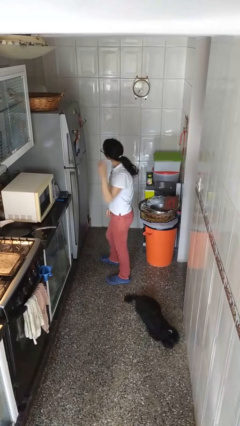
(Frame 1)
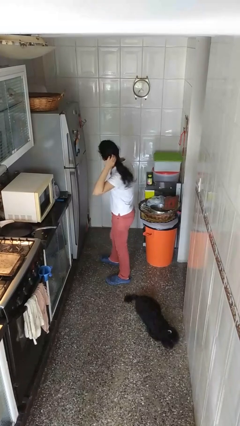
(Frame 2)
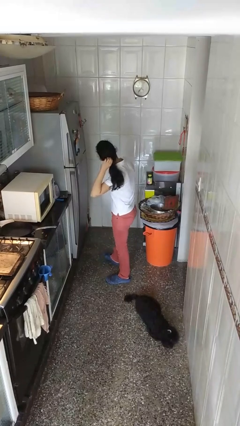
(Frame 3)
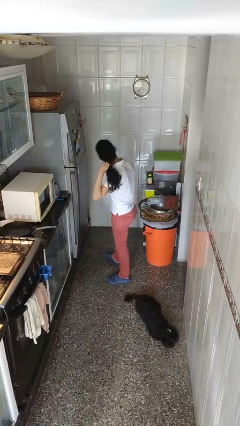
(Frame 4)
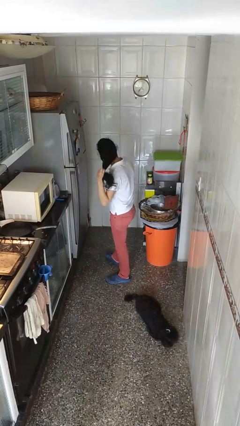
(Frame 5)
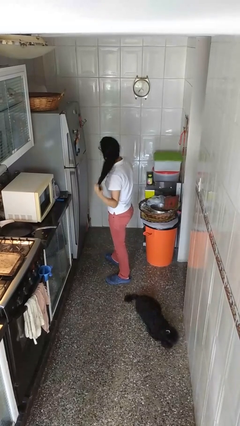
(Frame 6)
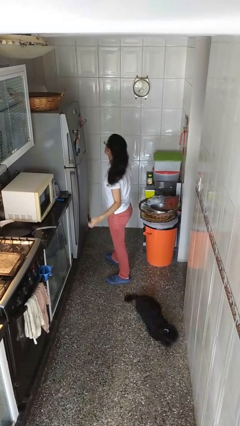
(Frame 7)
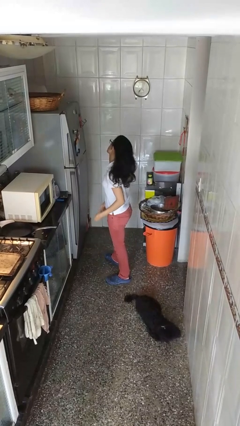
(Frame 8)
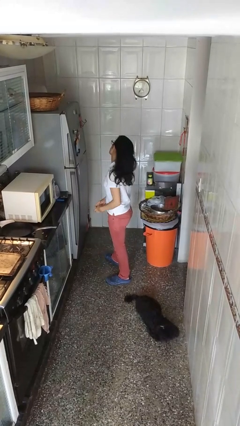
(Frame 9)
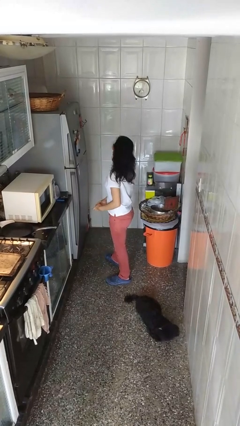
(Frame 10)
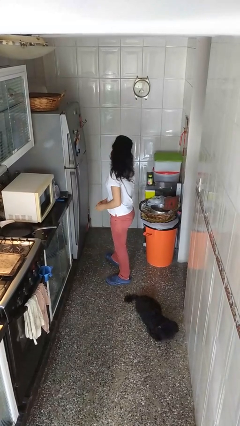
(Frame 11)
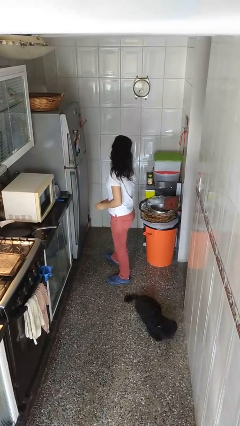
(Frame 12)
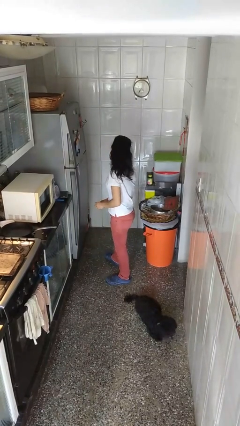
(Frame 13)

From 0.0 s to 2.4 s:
person takes off hairtie

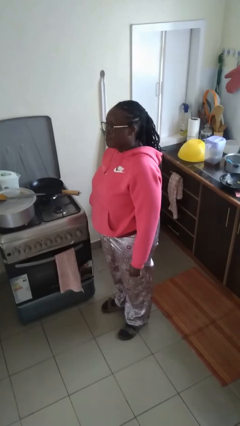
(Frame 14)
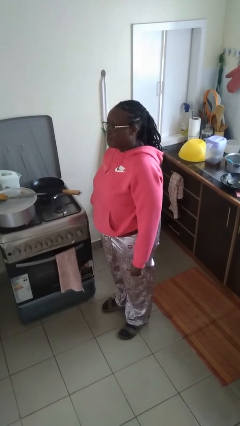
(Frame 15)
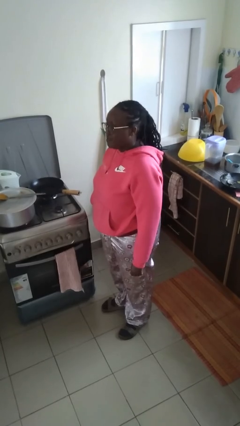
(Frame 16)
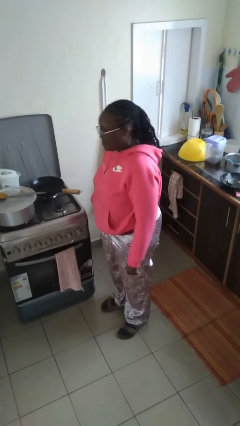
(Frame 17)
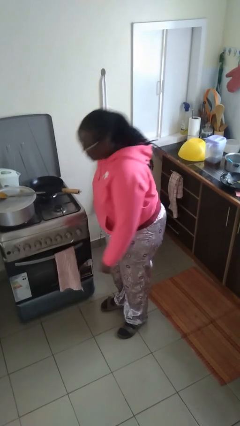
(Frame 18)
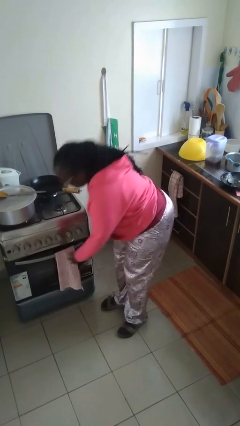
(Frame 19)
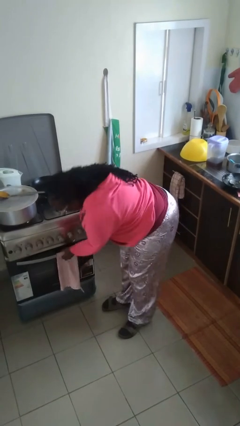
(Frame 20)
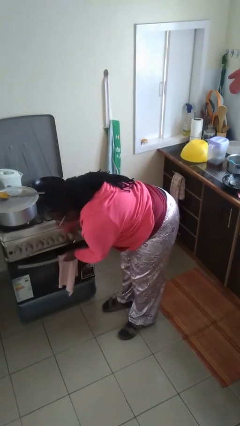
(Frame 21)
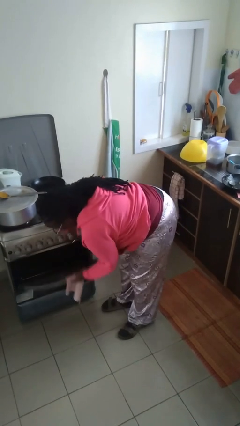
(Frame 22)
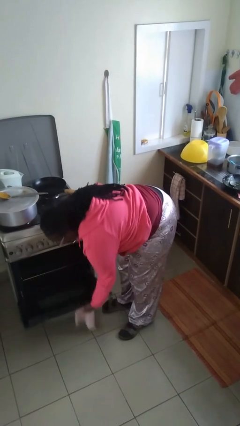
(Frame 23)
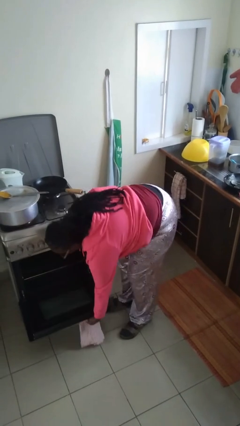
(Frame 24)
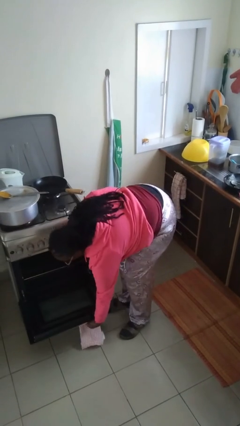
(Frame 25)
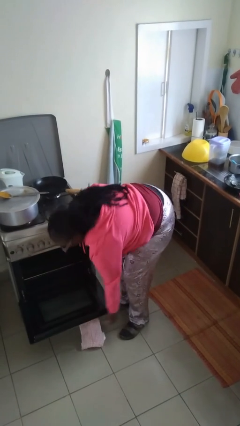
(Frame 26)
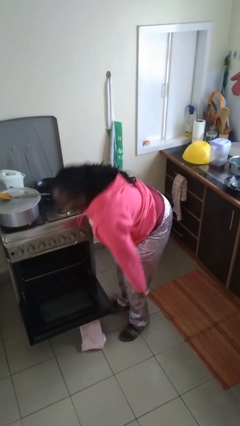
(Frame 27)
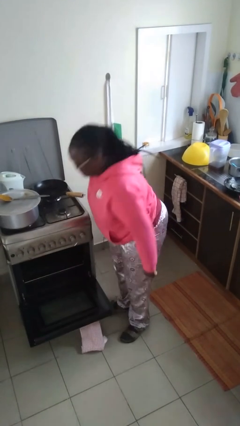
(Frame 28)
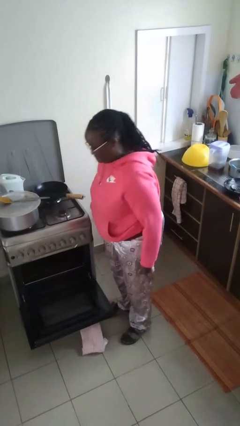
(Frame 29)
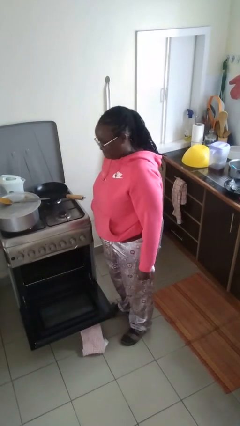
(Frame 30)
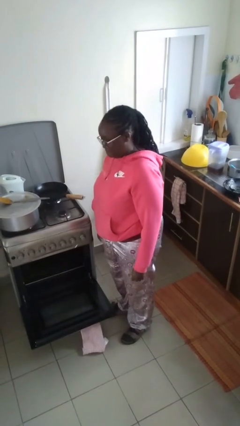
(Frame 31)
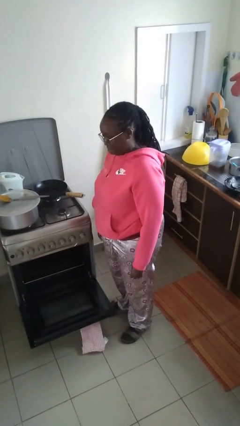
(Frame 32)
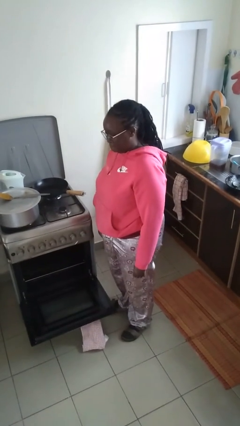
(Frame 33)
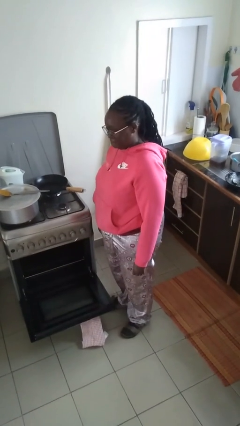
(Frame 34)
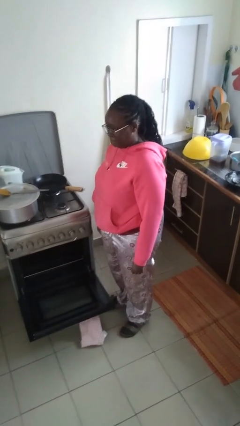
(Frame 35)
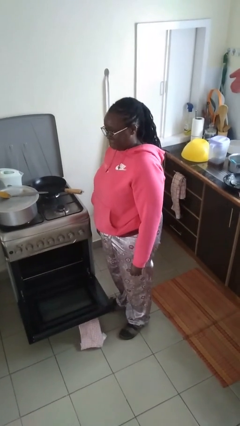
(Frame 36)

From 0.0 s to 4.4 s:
person opens oven door

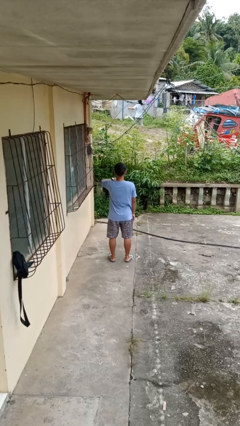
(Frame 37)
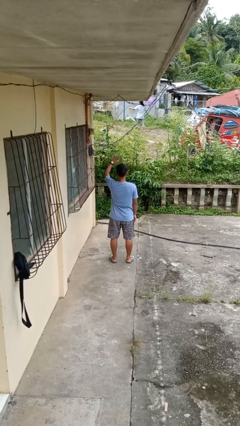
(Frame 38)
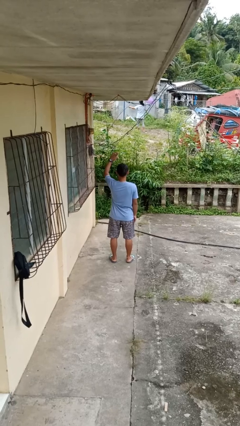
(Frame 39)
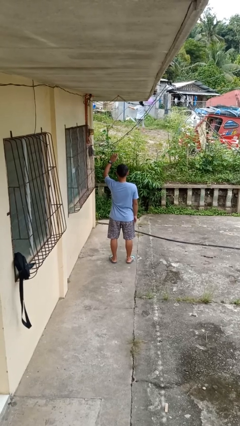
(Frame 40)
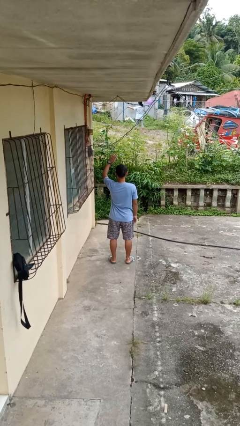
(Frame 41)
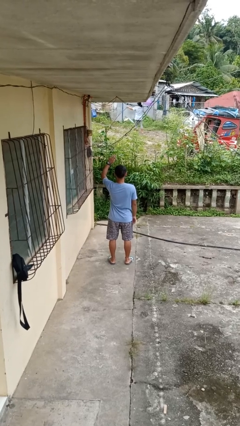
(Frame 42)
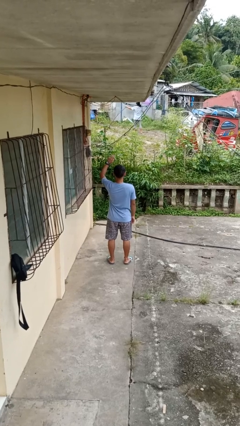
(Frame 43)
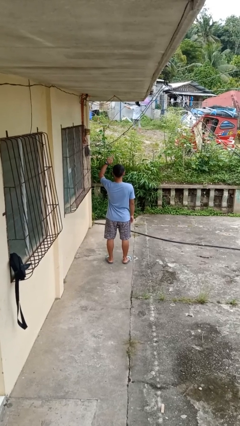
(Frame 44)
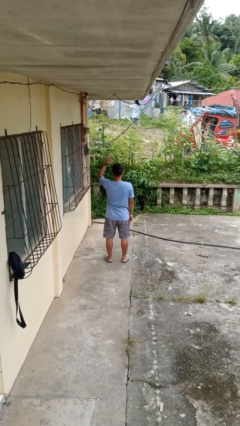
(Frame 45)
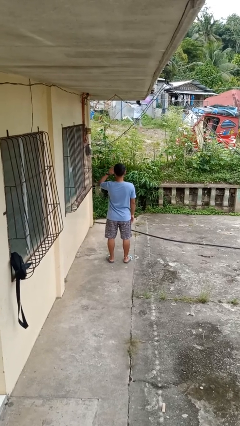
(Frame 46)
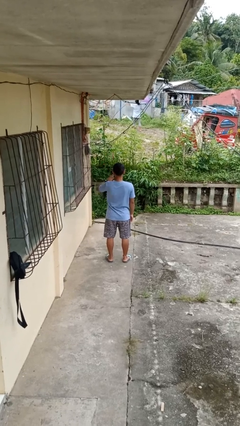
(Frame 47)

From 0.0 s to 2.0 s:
person gestures swipe up

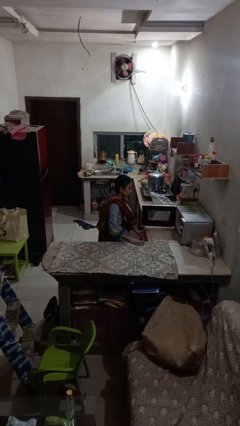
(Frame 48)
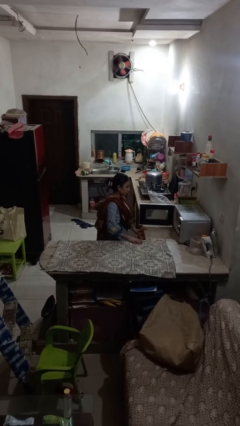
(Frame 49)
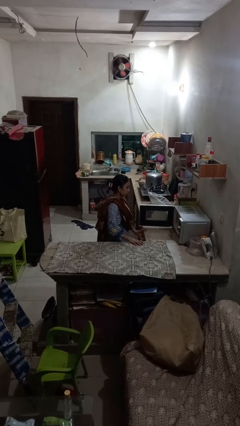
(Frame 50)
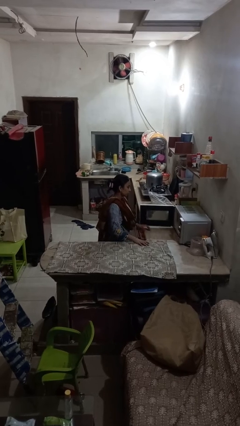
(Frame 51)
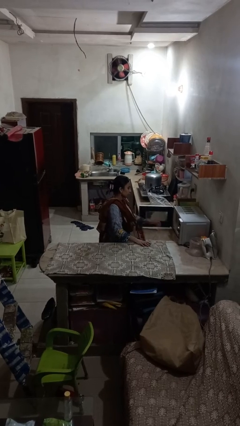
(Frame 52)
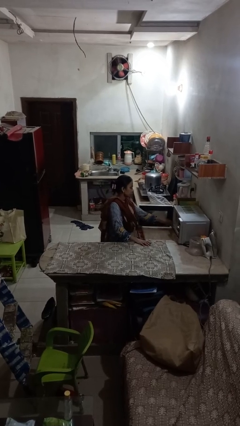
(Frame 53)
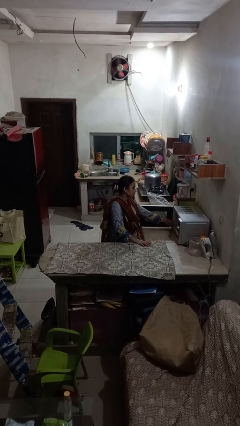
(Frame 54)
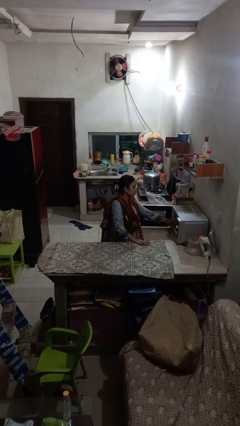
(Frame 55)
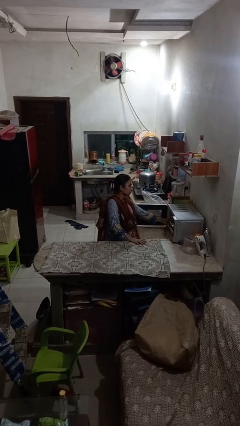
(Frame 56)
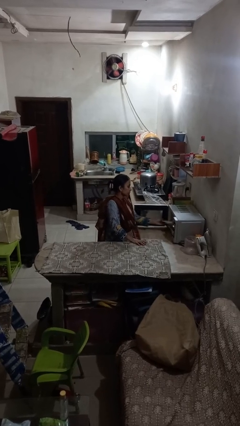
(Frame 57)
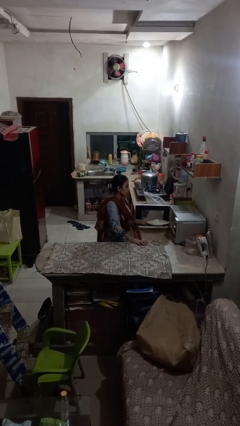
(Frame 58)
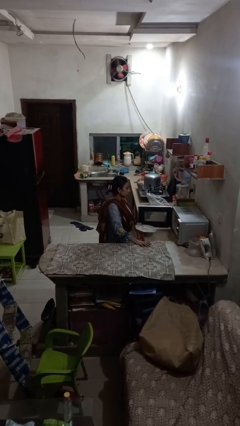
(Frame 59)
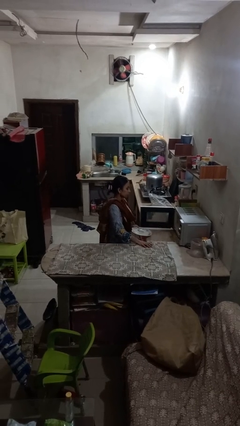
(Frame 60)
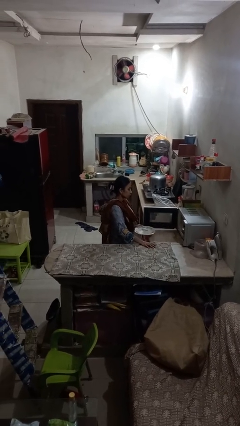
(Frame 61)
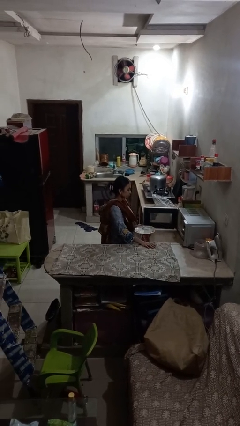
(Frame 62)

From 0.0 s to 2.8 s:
person takes object from microwave

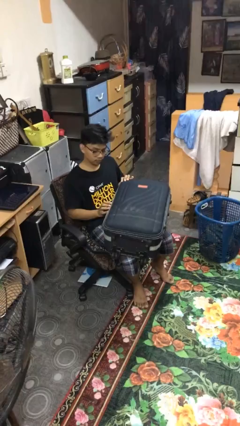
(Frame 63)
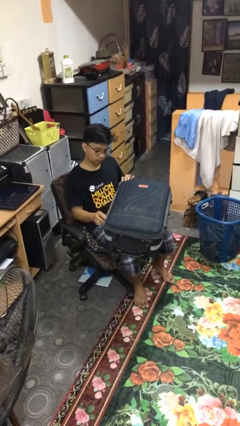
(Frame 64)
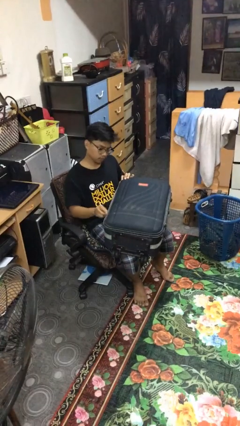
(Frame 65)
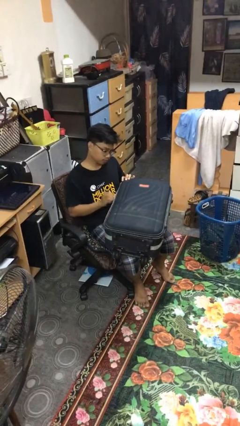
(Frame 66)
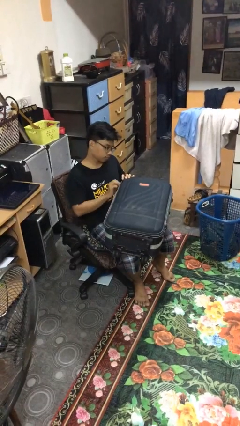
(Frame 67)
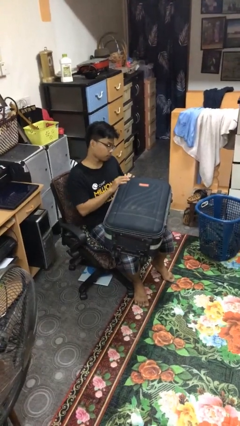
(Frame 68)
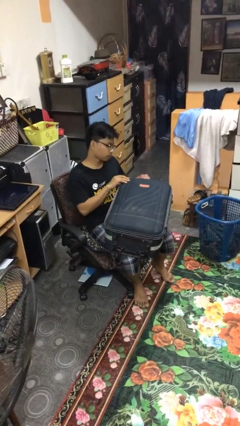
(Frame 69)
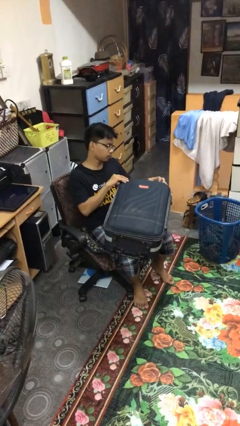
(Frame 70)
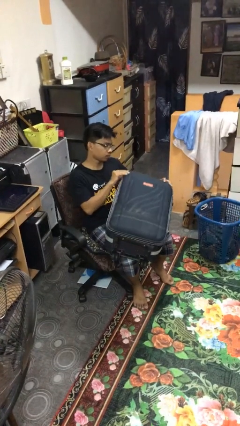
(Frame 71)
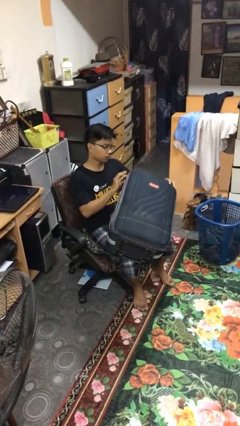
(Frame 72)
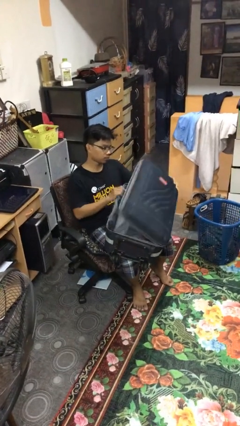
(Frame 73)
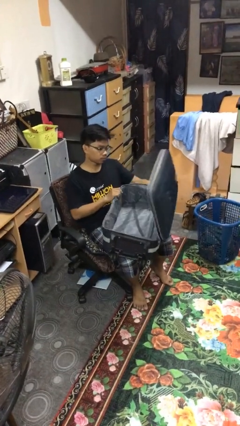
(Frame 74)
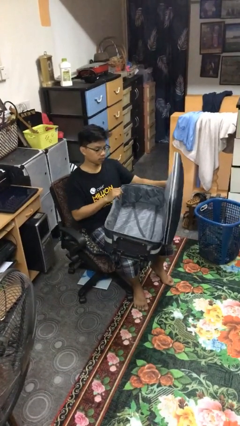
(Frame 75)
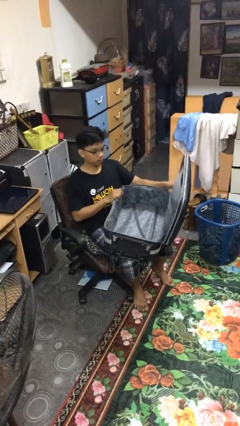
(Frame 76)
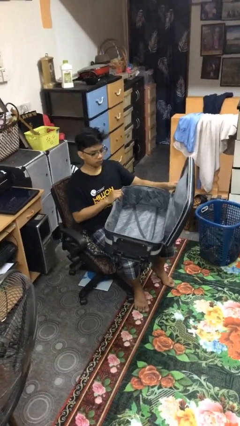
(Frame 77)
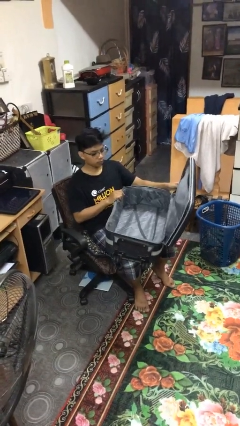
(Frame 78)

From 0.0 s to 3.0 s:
person opens suitcase

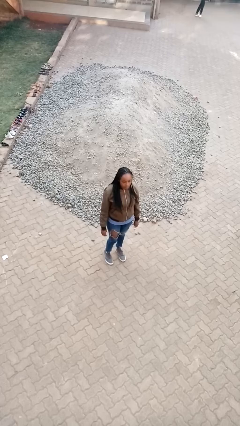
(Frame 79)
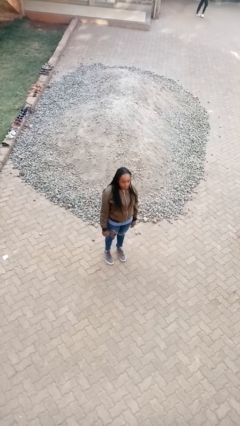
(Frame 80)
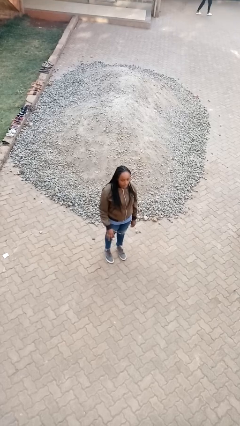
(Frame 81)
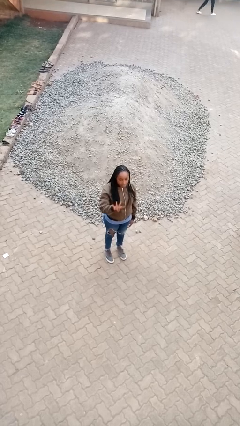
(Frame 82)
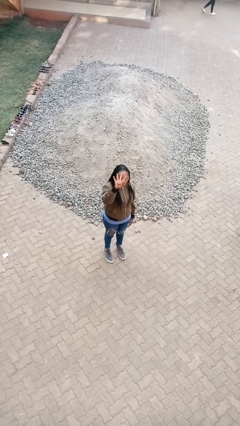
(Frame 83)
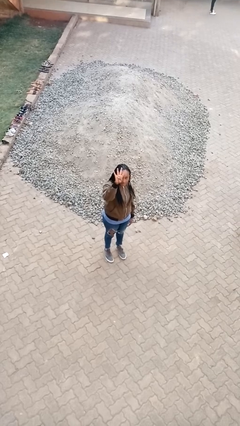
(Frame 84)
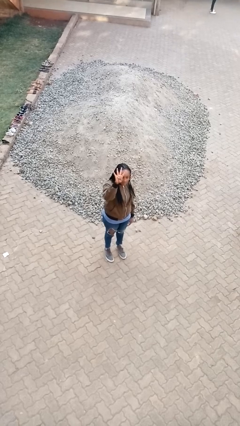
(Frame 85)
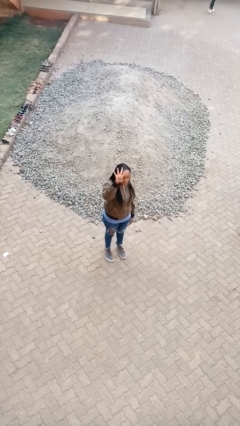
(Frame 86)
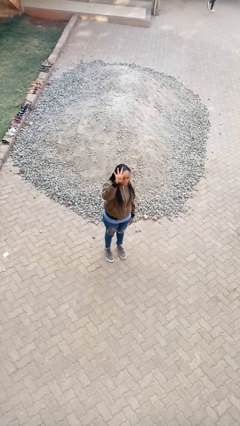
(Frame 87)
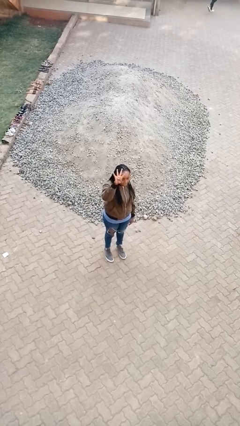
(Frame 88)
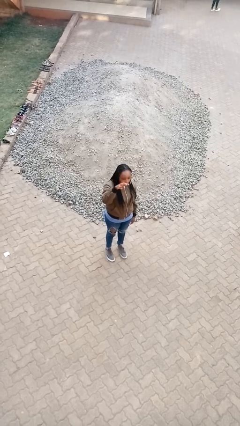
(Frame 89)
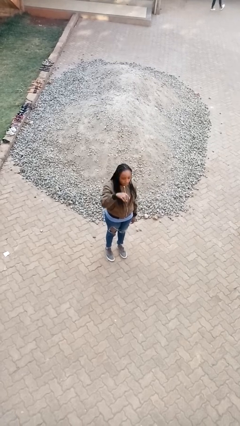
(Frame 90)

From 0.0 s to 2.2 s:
person gestures number four

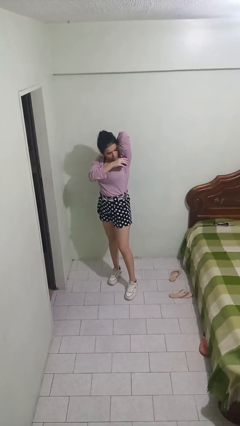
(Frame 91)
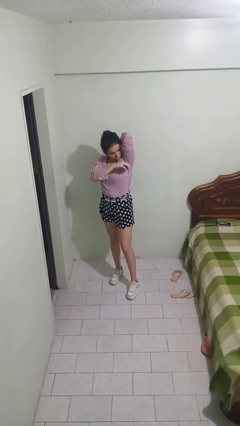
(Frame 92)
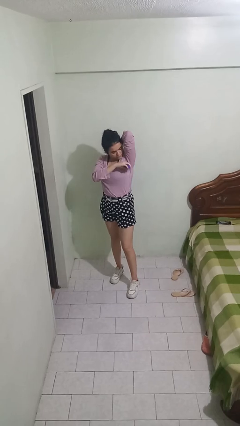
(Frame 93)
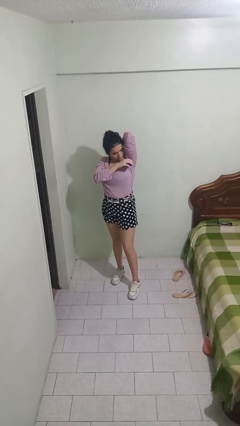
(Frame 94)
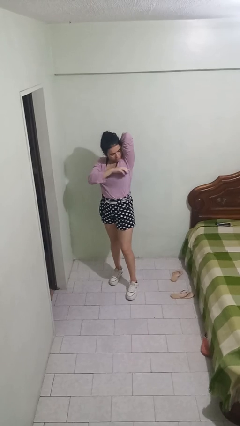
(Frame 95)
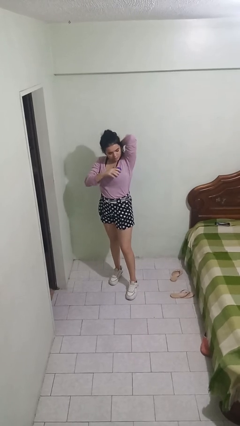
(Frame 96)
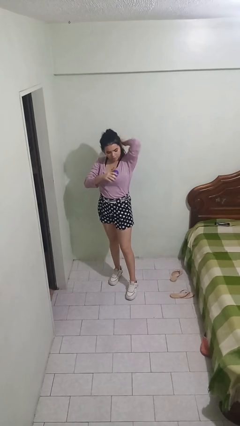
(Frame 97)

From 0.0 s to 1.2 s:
person applies deodorant
